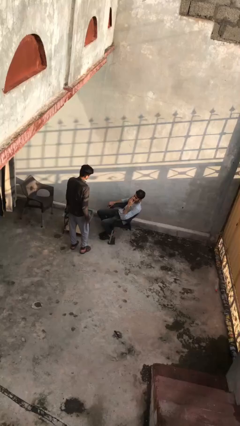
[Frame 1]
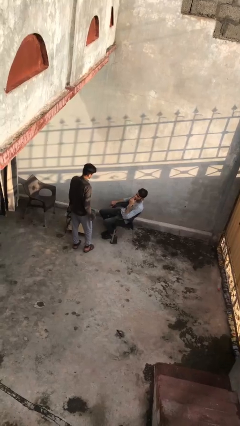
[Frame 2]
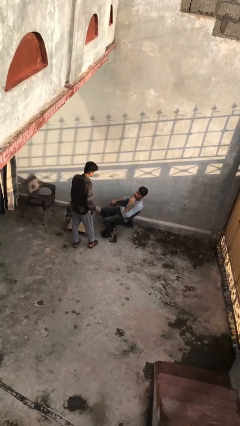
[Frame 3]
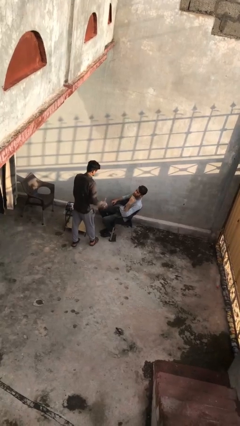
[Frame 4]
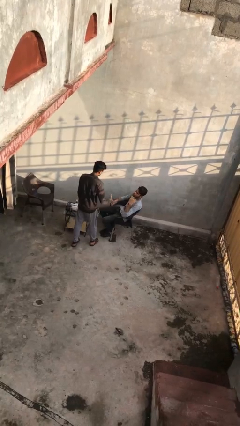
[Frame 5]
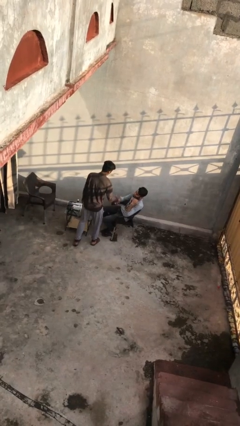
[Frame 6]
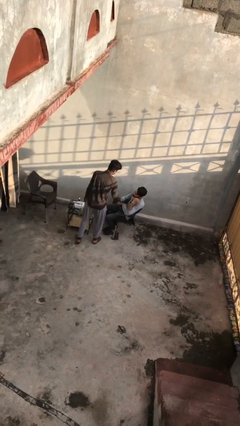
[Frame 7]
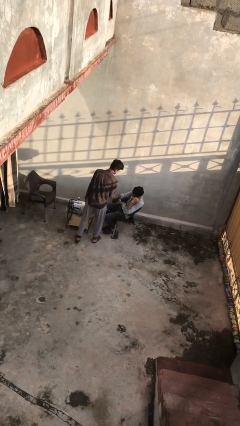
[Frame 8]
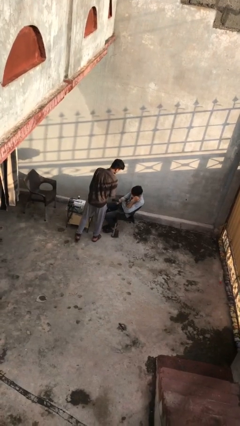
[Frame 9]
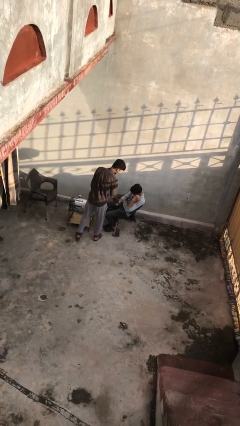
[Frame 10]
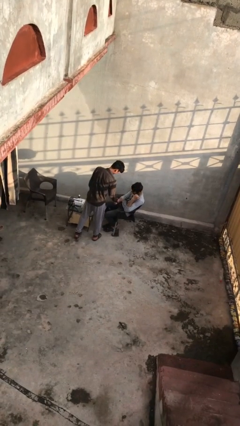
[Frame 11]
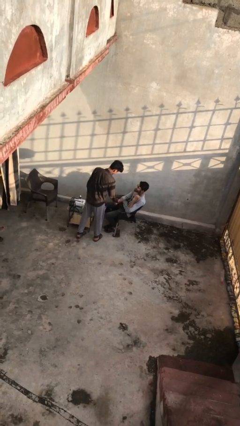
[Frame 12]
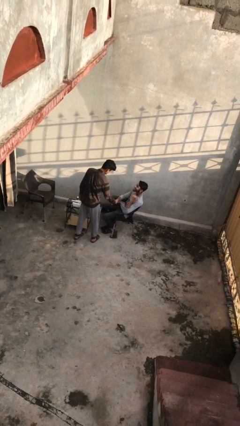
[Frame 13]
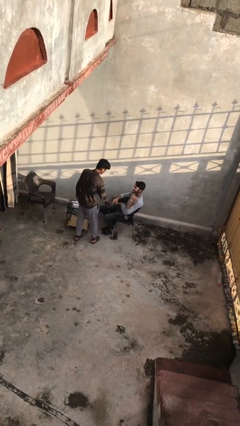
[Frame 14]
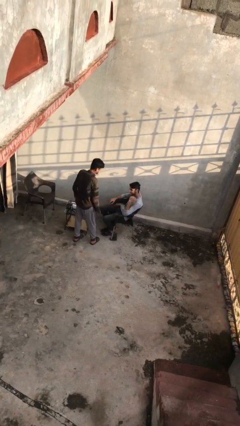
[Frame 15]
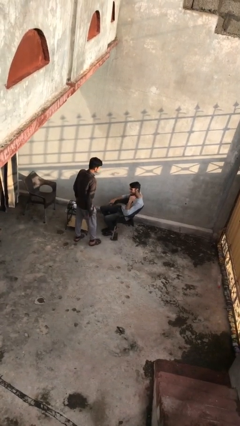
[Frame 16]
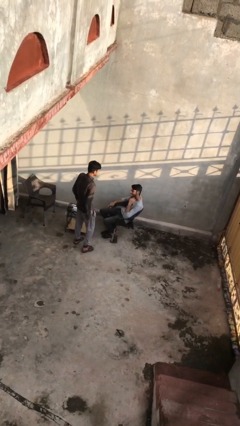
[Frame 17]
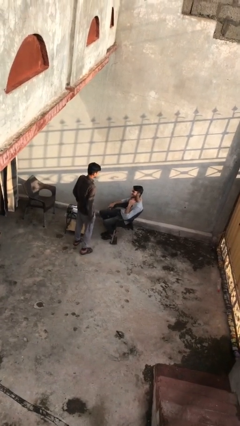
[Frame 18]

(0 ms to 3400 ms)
person shakes hand

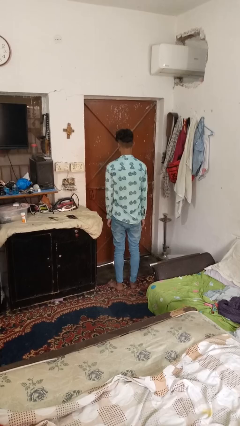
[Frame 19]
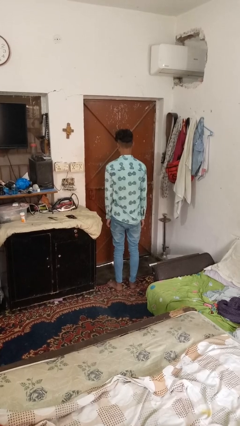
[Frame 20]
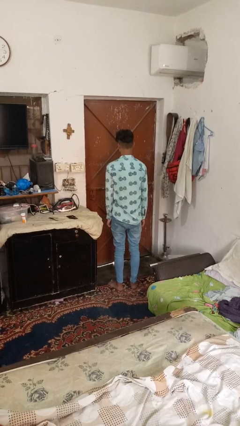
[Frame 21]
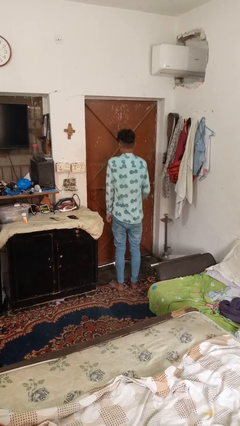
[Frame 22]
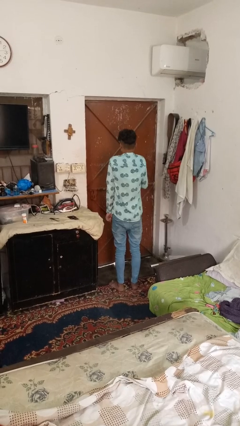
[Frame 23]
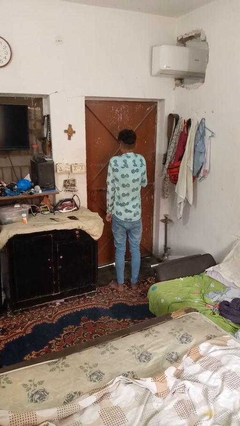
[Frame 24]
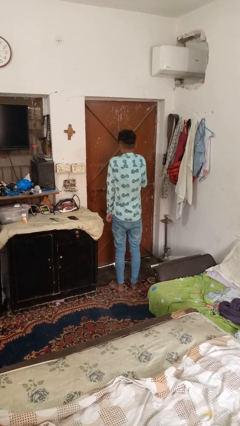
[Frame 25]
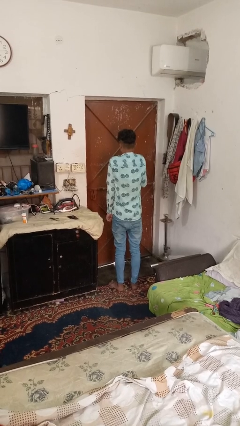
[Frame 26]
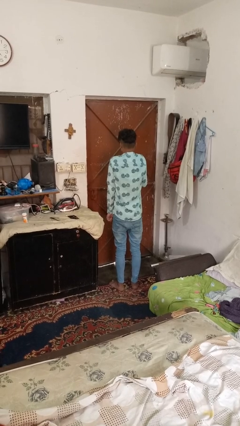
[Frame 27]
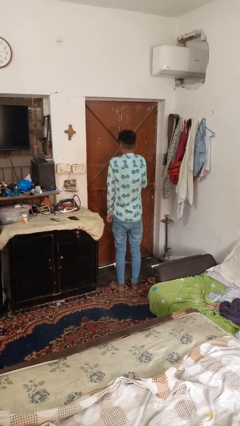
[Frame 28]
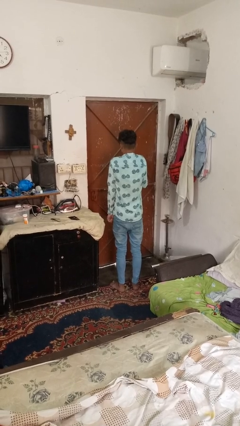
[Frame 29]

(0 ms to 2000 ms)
person shrugs

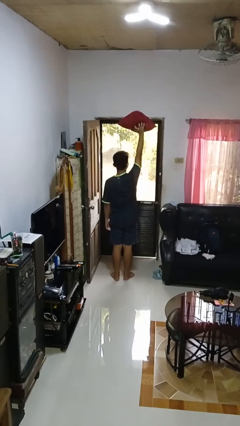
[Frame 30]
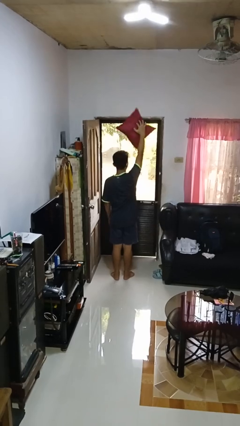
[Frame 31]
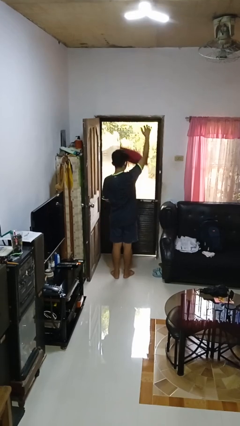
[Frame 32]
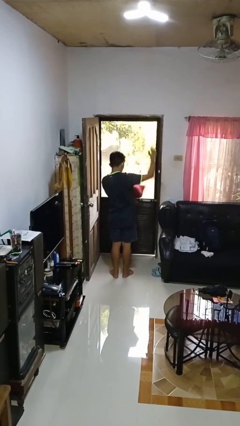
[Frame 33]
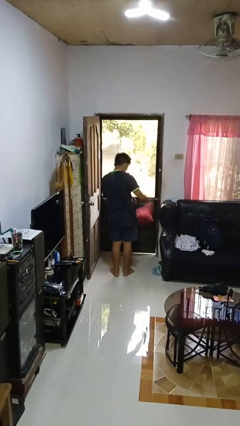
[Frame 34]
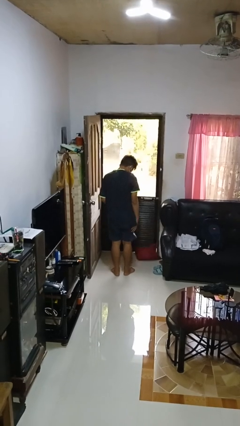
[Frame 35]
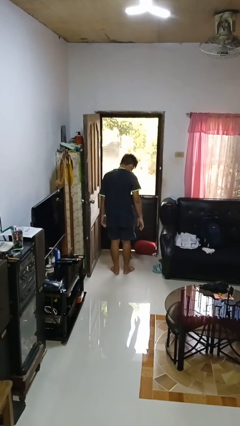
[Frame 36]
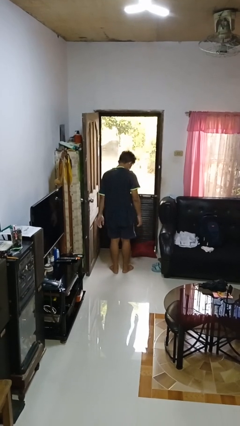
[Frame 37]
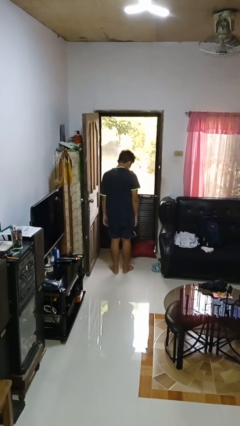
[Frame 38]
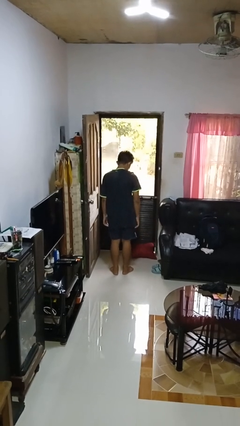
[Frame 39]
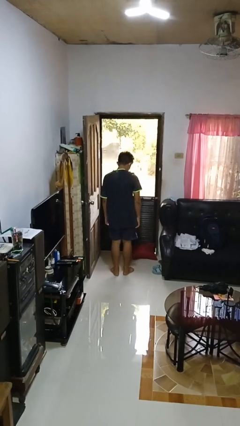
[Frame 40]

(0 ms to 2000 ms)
person drops object

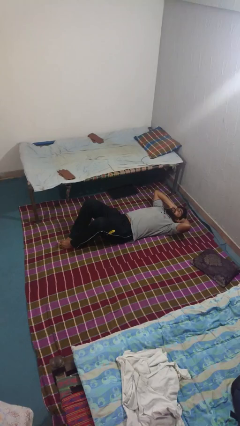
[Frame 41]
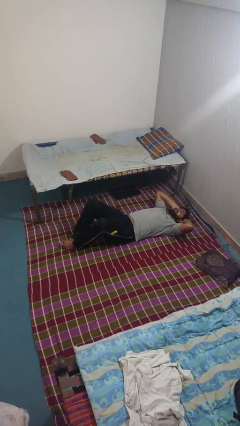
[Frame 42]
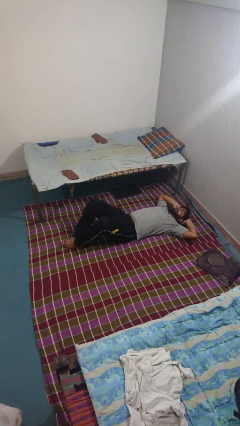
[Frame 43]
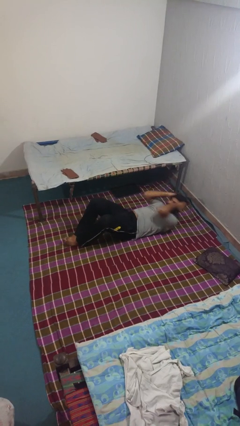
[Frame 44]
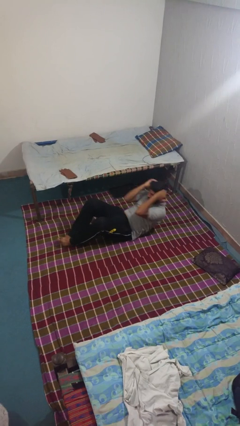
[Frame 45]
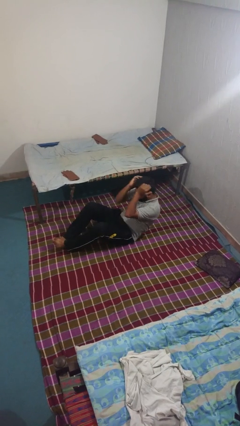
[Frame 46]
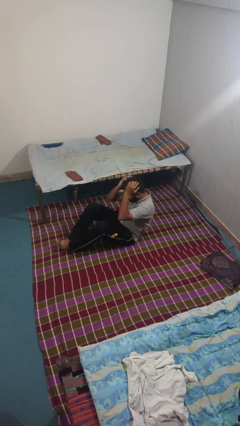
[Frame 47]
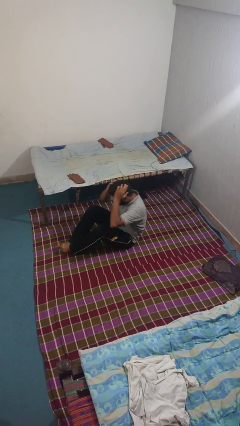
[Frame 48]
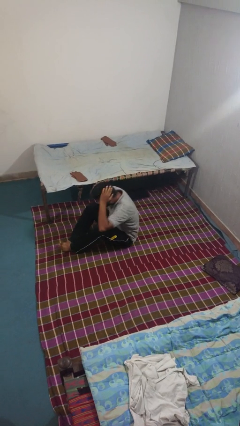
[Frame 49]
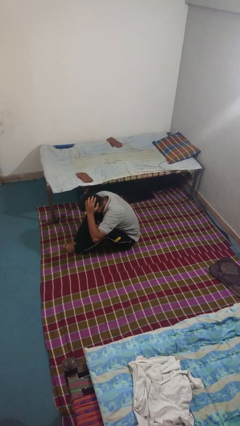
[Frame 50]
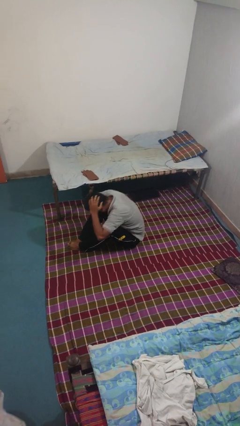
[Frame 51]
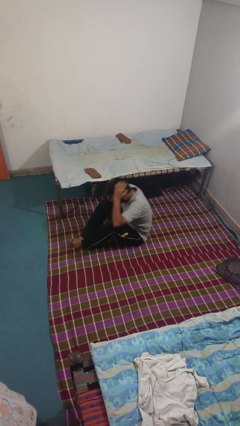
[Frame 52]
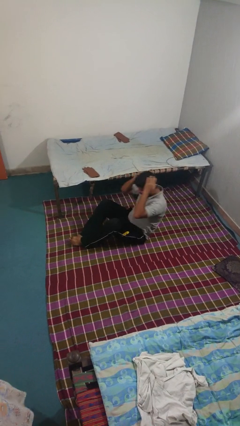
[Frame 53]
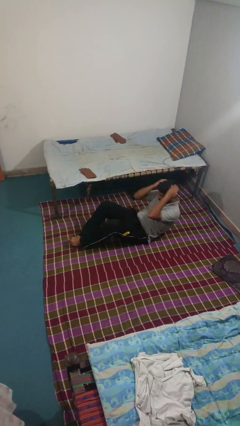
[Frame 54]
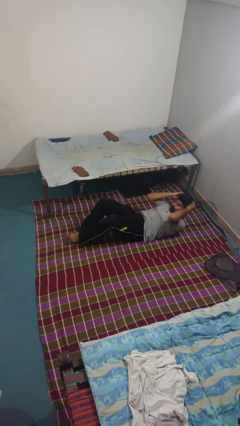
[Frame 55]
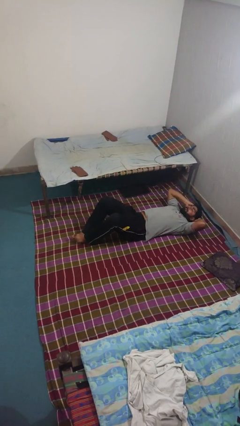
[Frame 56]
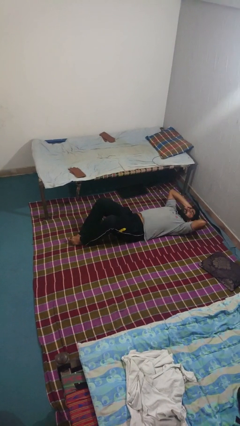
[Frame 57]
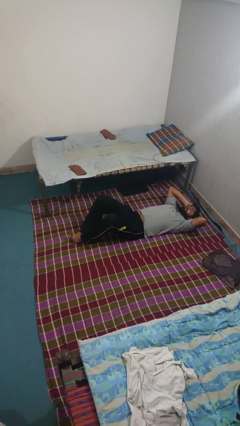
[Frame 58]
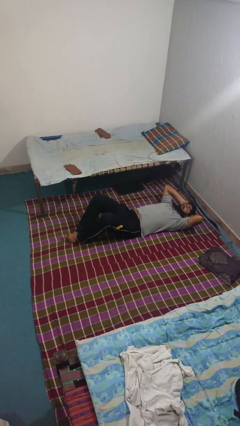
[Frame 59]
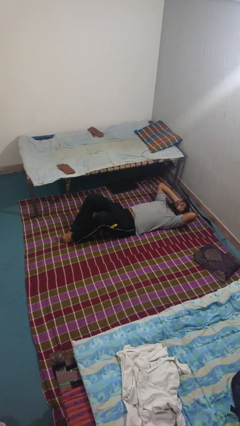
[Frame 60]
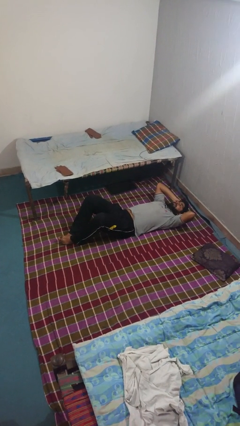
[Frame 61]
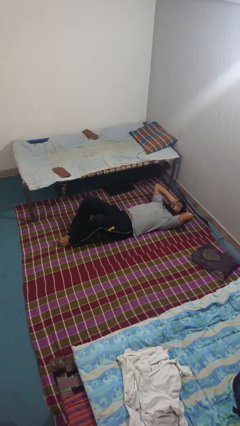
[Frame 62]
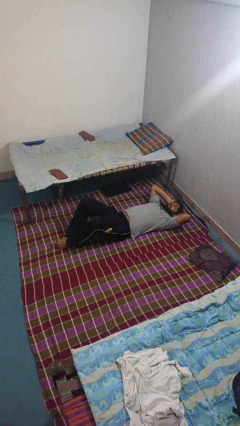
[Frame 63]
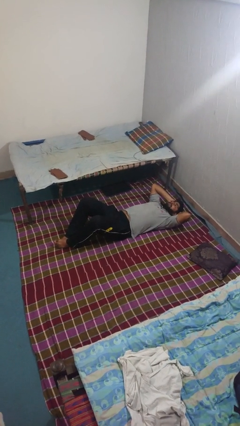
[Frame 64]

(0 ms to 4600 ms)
person exercises with situp

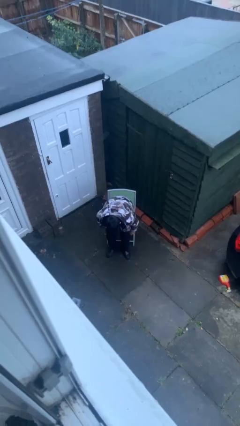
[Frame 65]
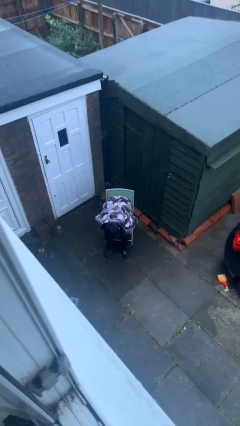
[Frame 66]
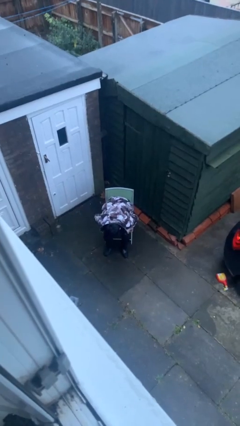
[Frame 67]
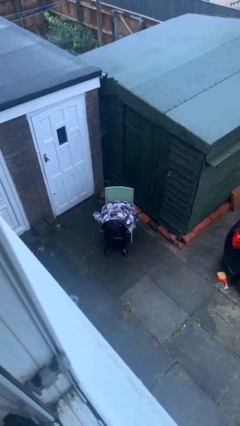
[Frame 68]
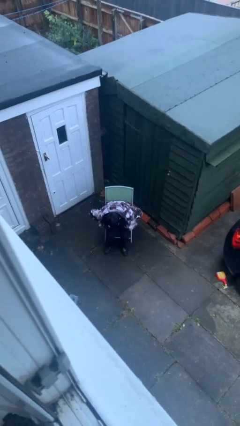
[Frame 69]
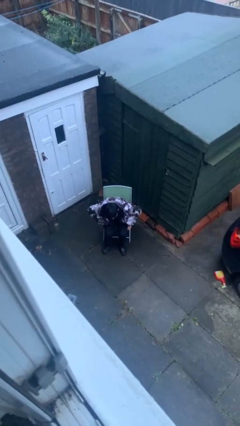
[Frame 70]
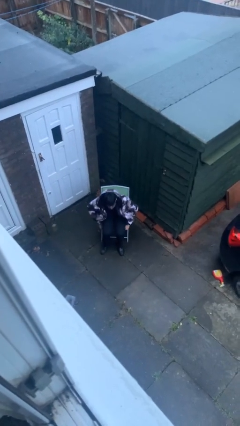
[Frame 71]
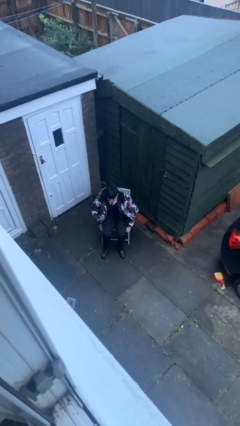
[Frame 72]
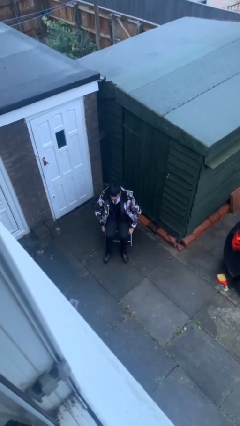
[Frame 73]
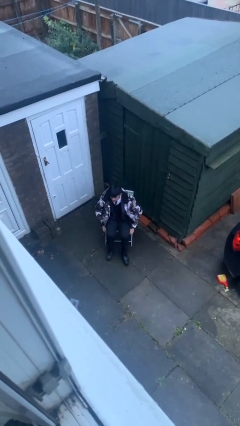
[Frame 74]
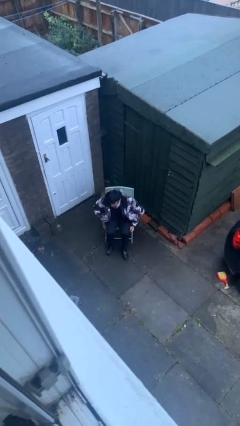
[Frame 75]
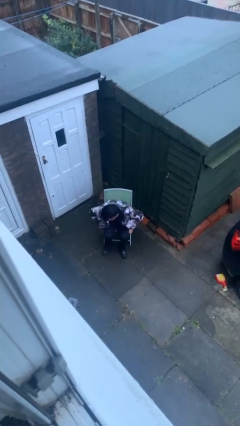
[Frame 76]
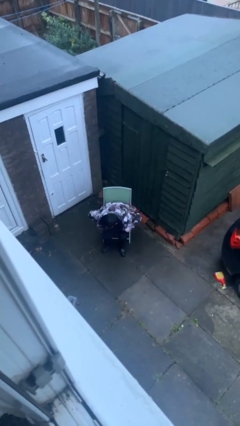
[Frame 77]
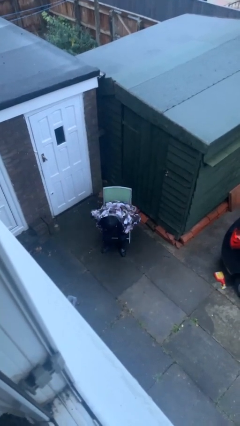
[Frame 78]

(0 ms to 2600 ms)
person sits down

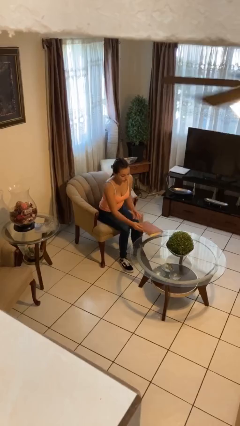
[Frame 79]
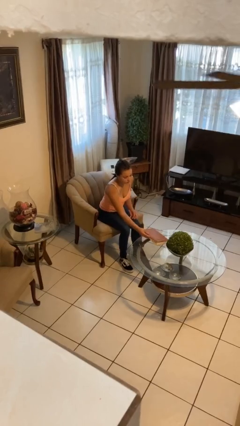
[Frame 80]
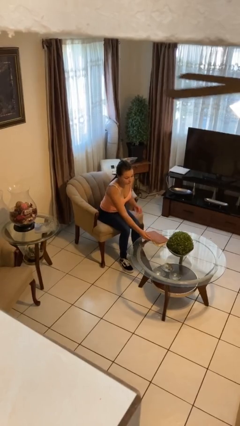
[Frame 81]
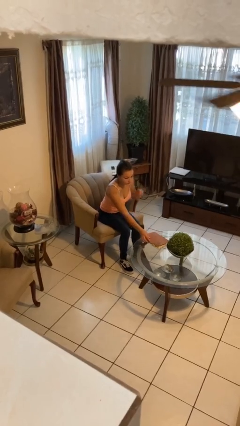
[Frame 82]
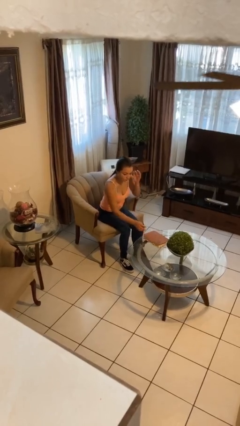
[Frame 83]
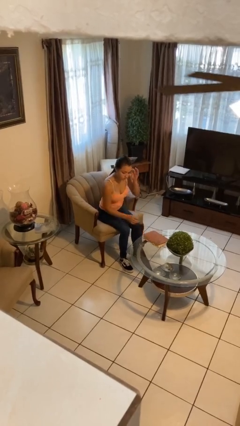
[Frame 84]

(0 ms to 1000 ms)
person puts down object on table

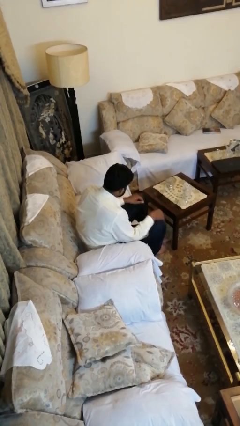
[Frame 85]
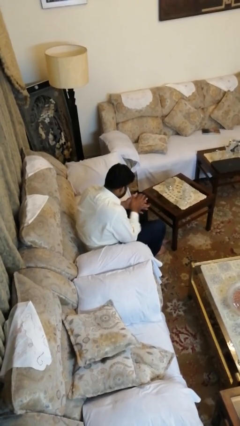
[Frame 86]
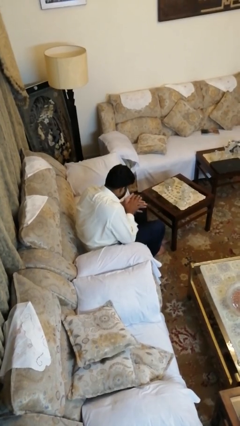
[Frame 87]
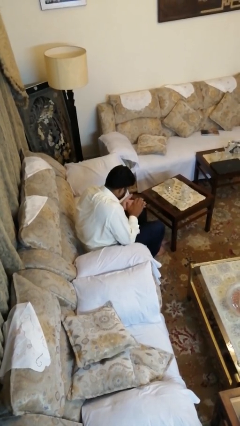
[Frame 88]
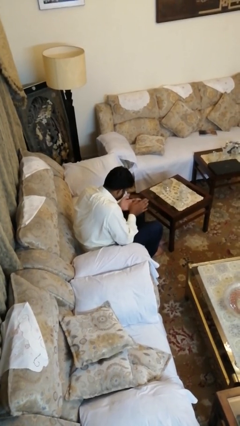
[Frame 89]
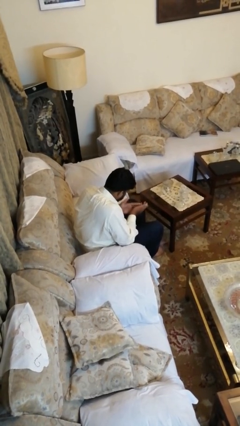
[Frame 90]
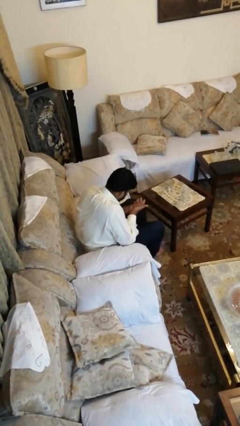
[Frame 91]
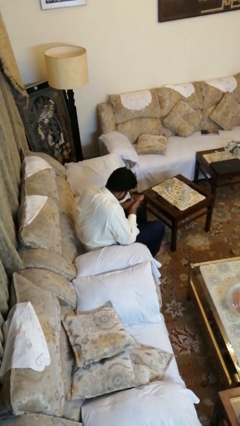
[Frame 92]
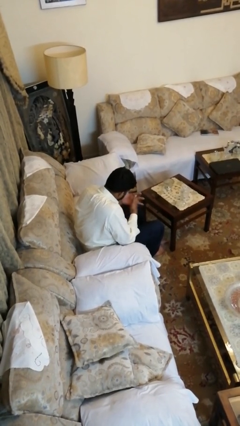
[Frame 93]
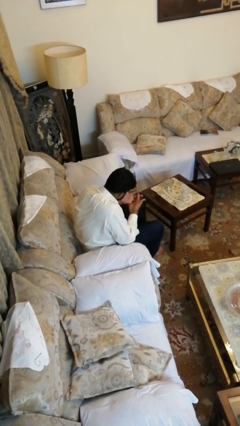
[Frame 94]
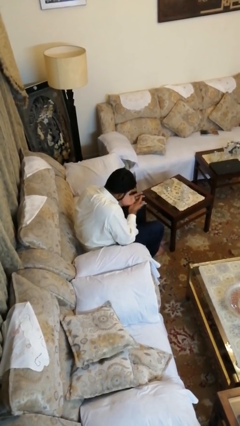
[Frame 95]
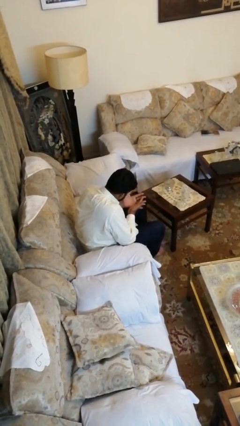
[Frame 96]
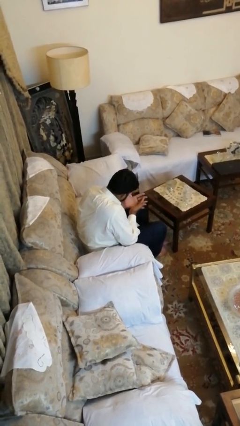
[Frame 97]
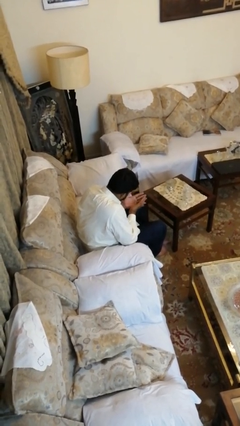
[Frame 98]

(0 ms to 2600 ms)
person looks at hands in lap
